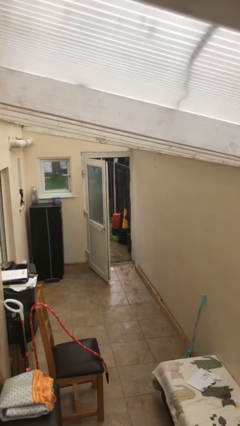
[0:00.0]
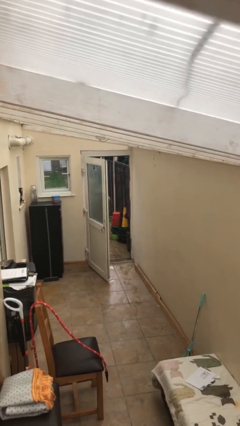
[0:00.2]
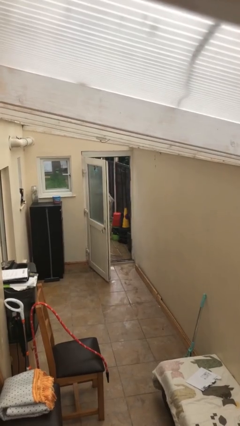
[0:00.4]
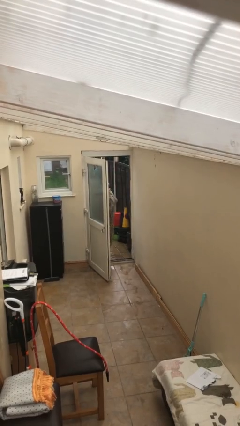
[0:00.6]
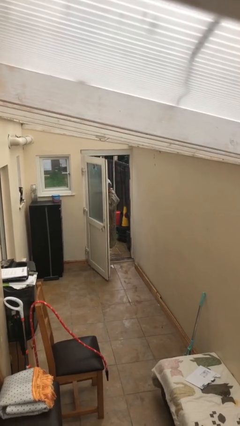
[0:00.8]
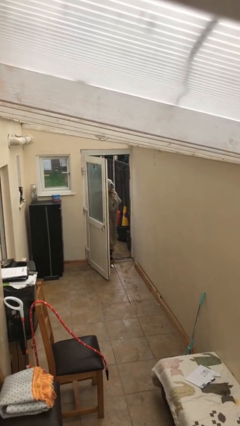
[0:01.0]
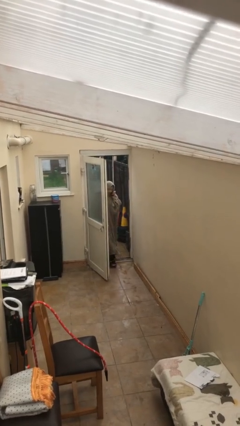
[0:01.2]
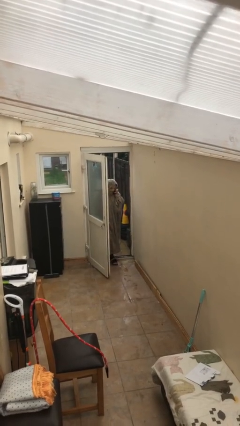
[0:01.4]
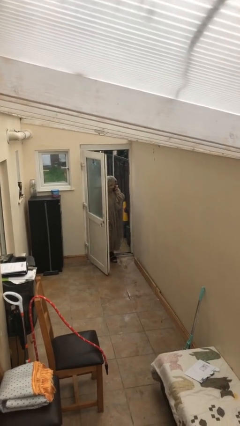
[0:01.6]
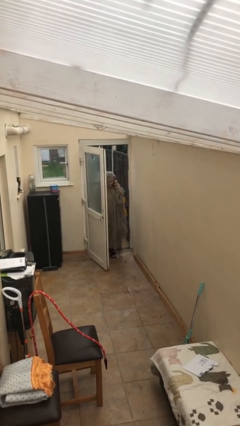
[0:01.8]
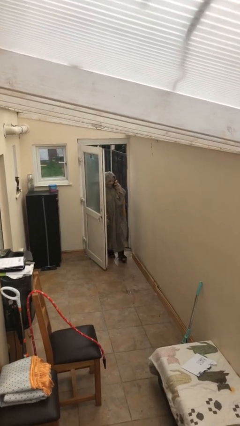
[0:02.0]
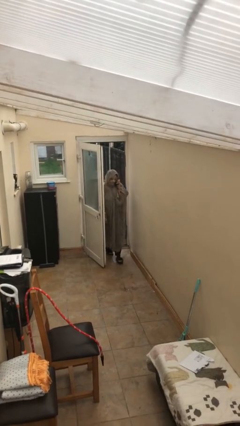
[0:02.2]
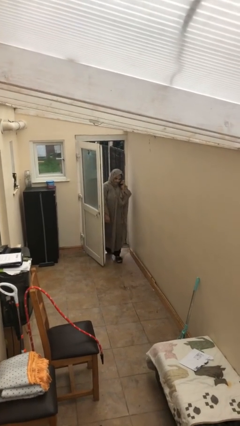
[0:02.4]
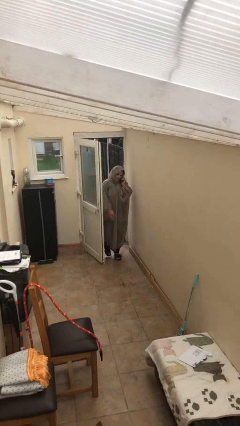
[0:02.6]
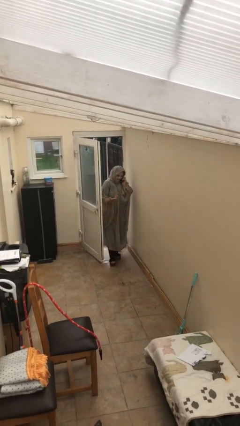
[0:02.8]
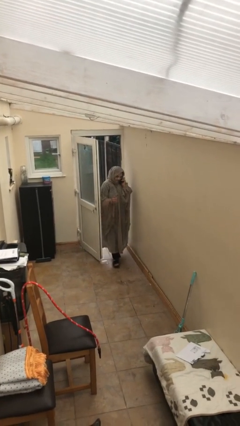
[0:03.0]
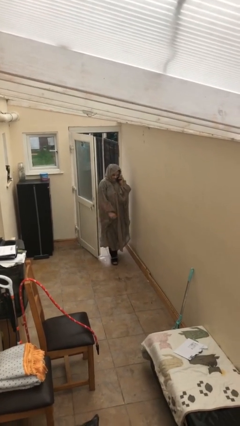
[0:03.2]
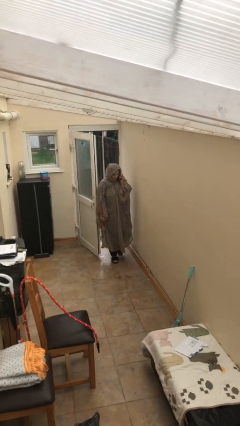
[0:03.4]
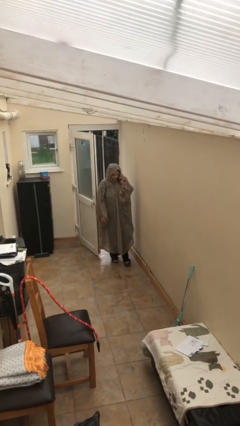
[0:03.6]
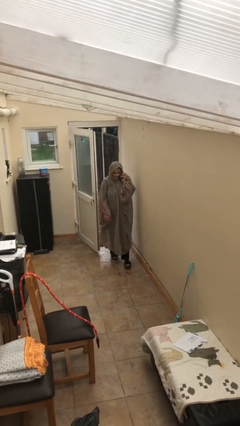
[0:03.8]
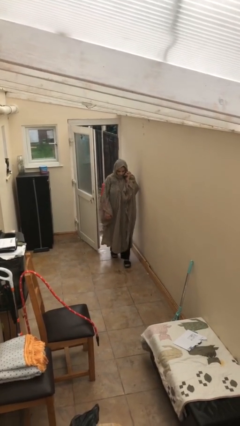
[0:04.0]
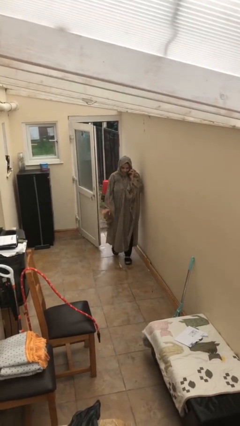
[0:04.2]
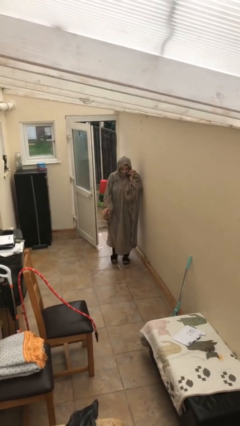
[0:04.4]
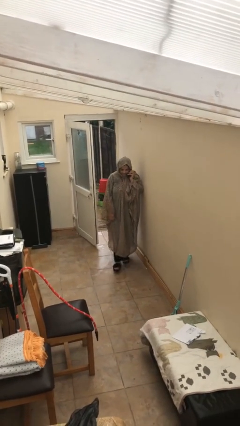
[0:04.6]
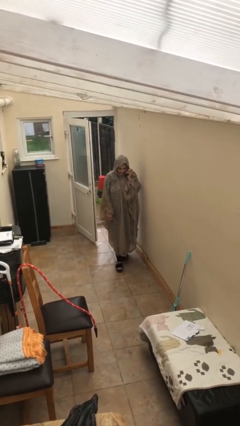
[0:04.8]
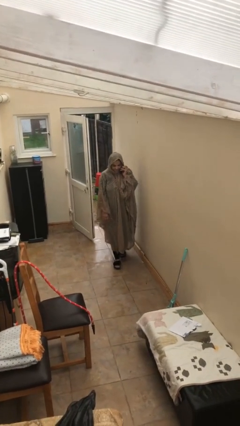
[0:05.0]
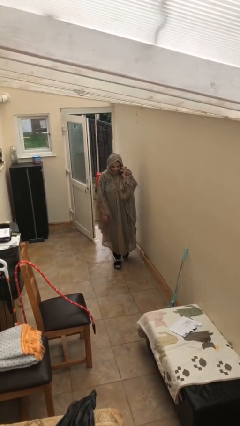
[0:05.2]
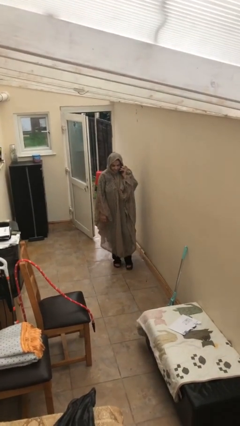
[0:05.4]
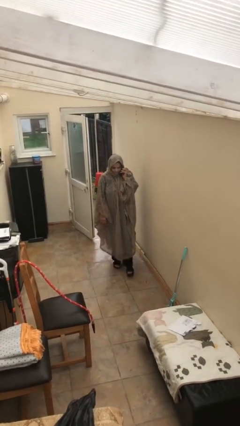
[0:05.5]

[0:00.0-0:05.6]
person enters scene through structure

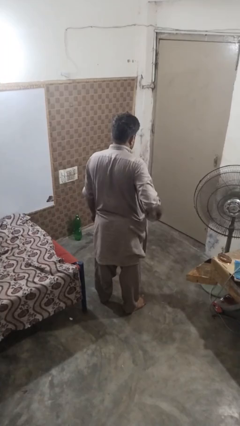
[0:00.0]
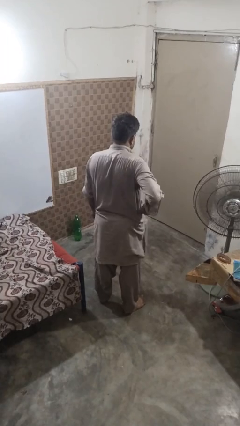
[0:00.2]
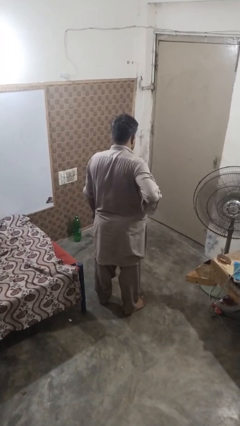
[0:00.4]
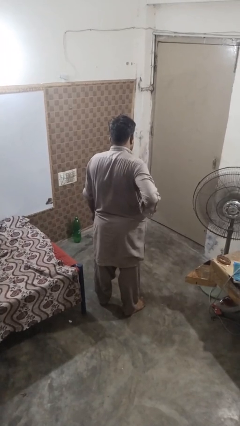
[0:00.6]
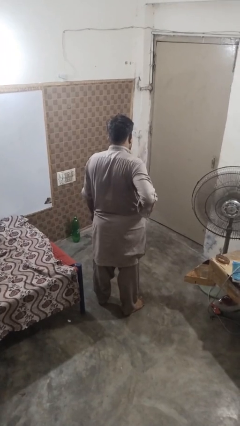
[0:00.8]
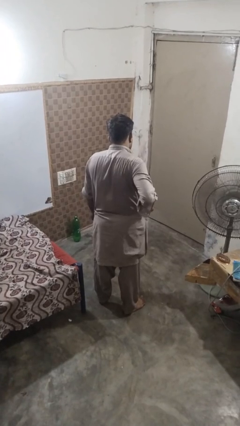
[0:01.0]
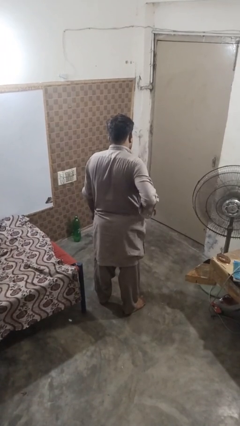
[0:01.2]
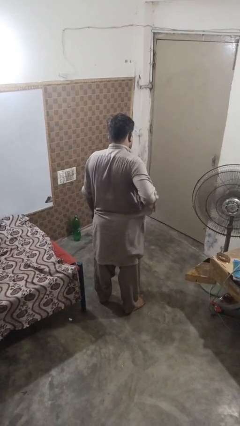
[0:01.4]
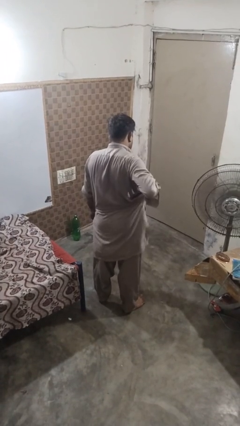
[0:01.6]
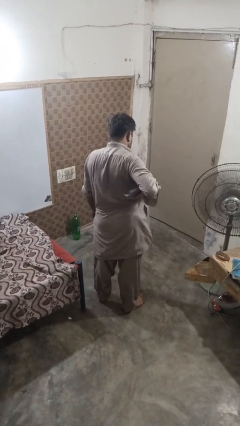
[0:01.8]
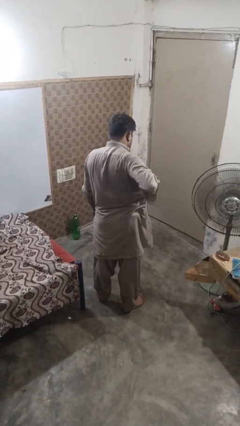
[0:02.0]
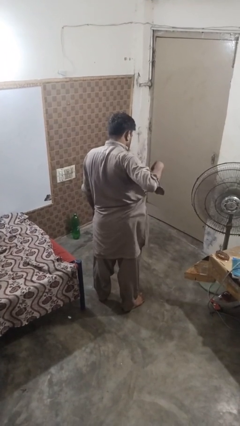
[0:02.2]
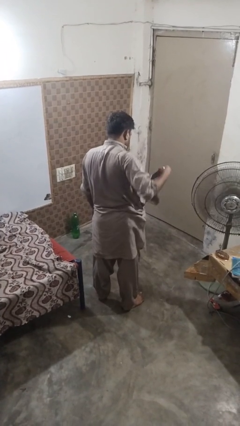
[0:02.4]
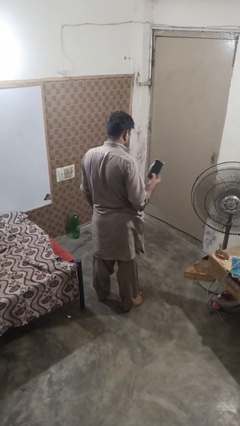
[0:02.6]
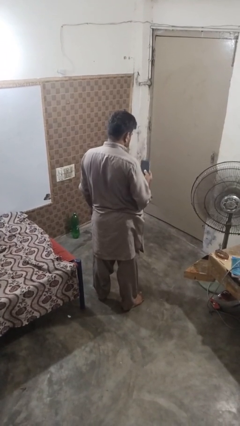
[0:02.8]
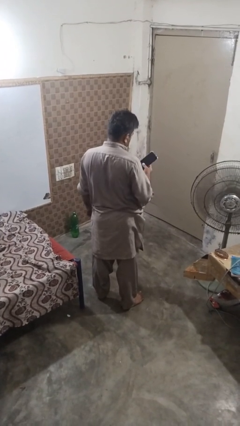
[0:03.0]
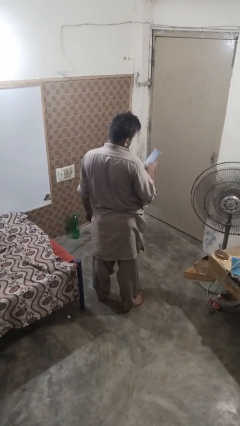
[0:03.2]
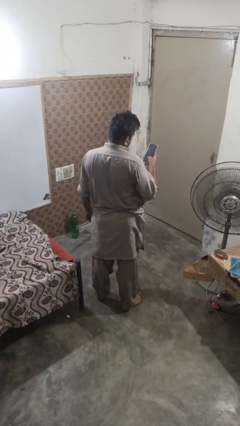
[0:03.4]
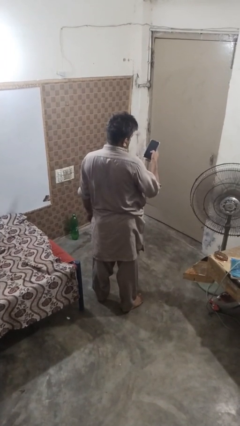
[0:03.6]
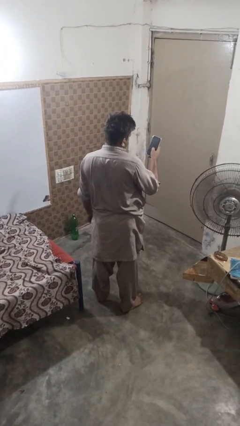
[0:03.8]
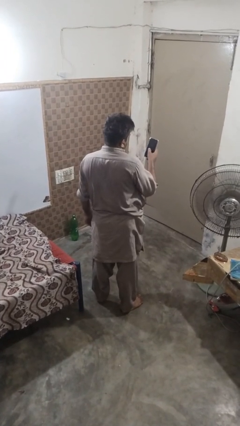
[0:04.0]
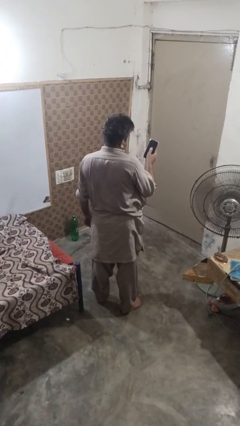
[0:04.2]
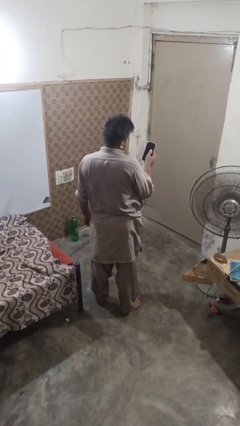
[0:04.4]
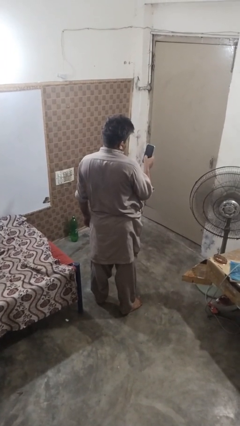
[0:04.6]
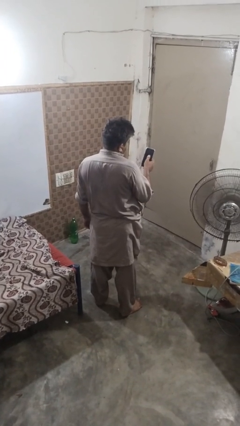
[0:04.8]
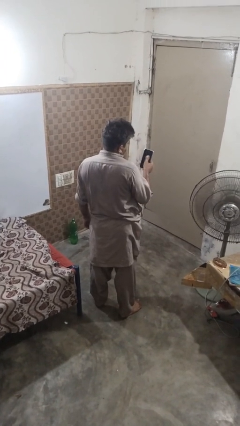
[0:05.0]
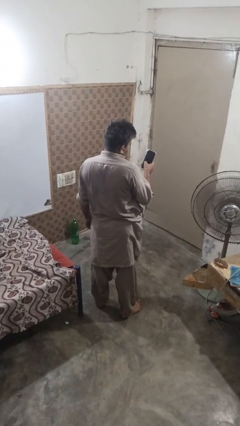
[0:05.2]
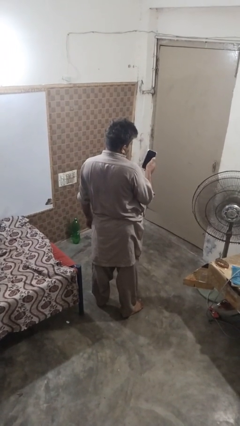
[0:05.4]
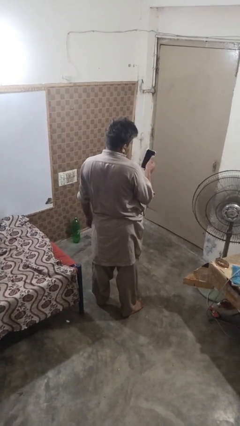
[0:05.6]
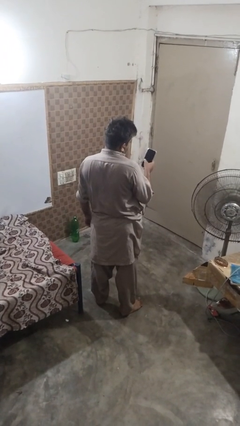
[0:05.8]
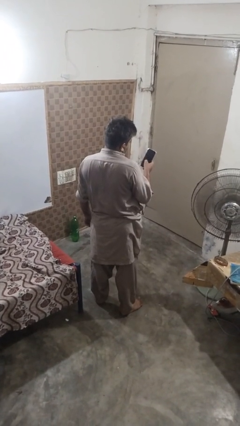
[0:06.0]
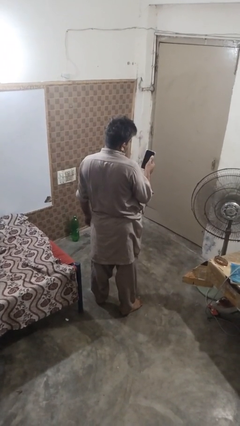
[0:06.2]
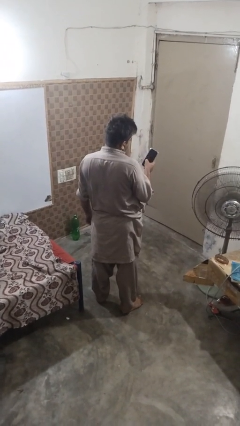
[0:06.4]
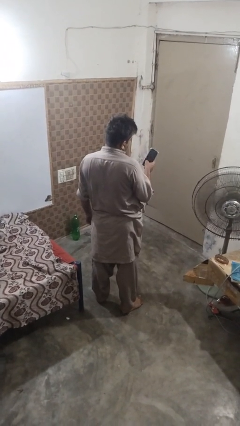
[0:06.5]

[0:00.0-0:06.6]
person takes phone from pocket

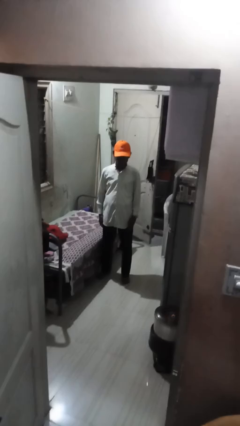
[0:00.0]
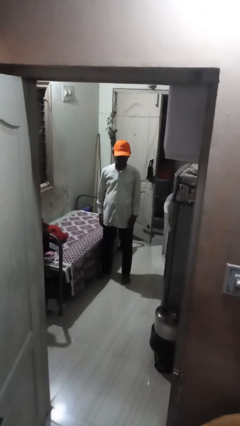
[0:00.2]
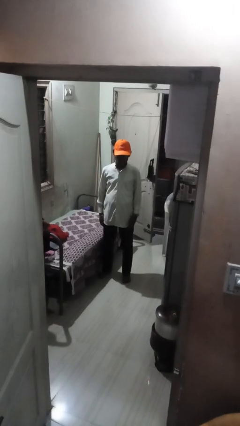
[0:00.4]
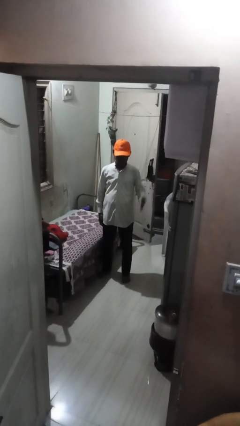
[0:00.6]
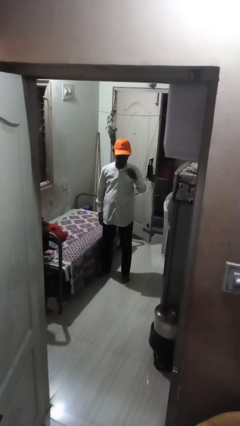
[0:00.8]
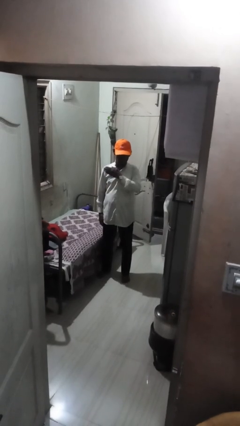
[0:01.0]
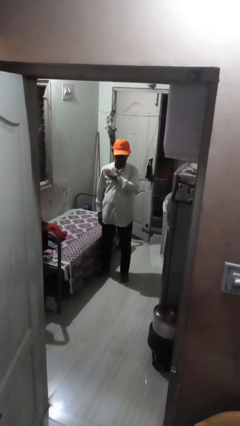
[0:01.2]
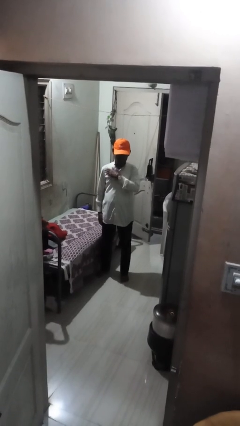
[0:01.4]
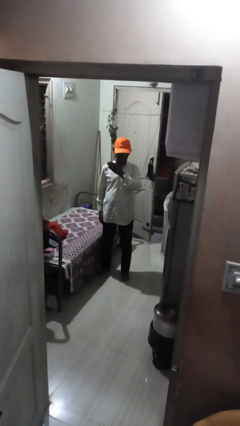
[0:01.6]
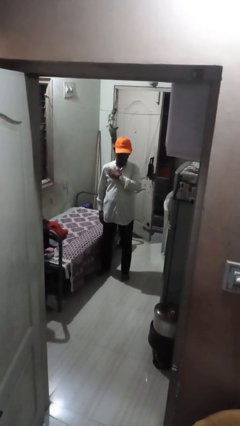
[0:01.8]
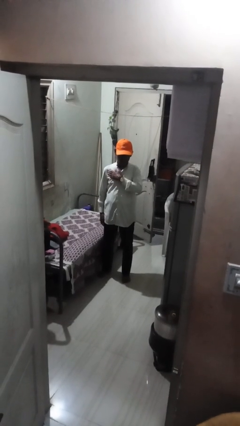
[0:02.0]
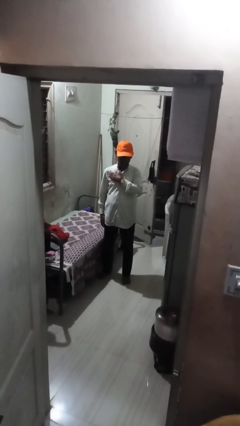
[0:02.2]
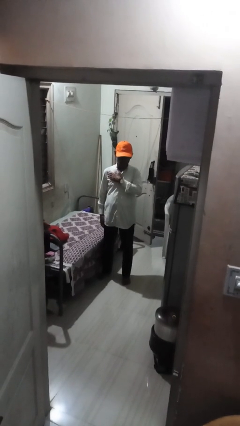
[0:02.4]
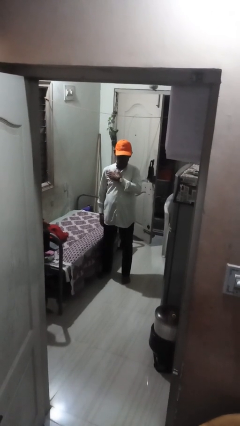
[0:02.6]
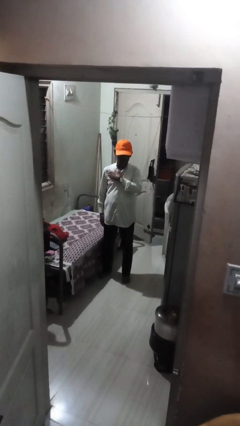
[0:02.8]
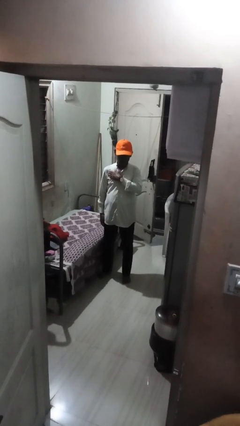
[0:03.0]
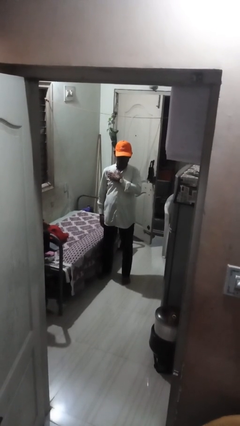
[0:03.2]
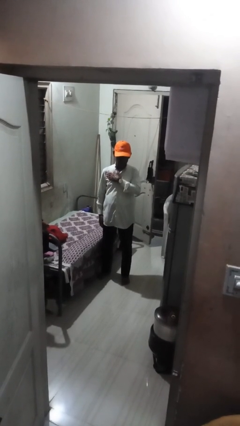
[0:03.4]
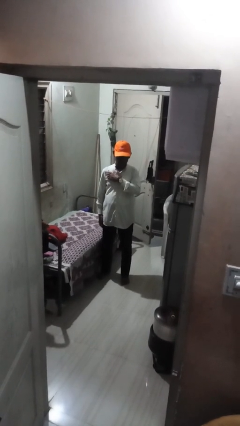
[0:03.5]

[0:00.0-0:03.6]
person drums on chest

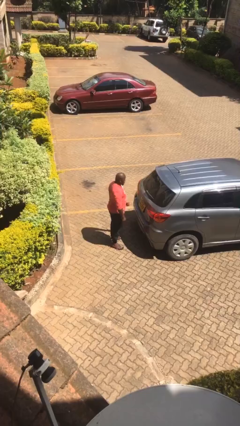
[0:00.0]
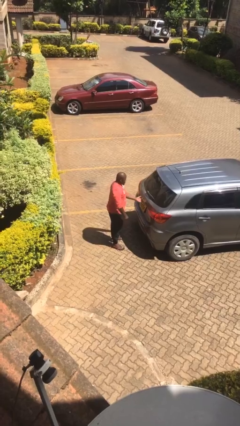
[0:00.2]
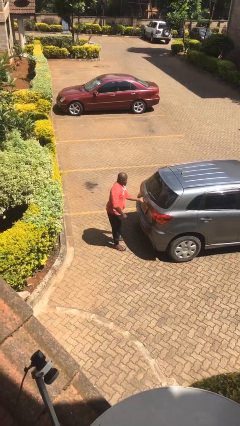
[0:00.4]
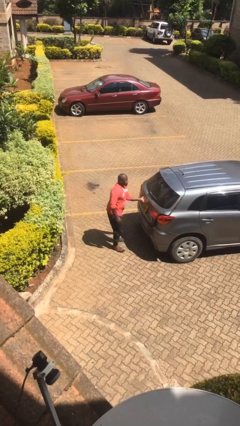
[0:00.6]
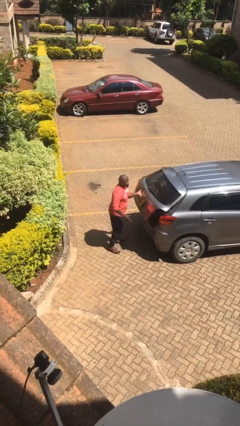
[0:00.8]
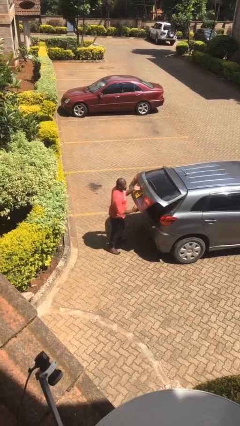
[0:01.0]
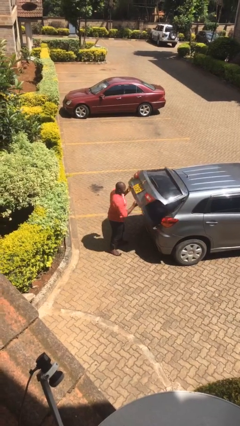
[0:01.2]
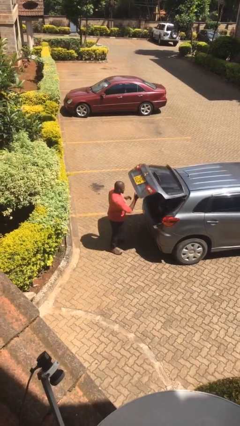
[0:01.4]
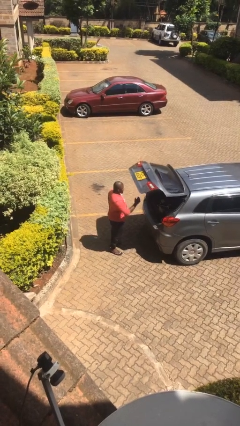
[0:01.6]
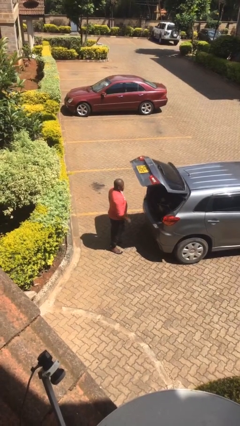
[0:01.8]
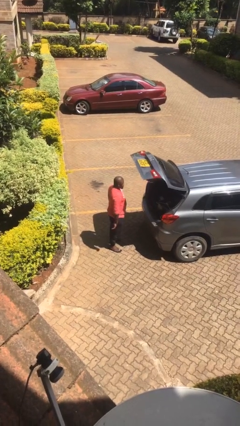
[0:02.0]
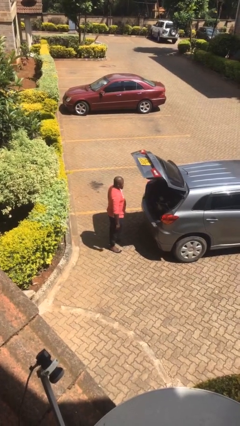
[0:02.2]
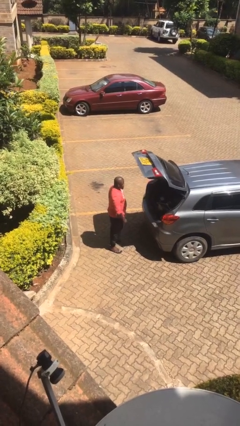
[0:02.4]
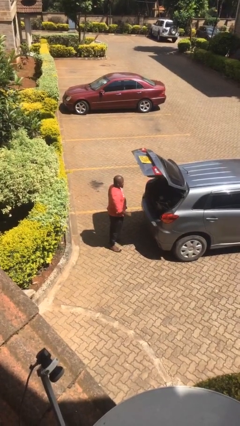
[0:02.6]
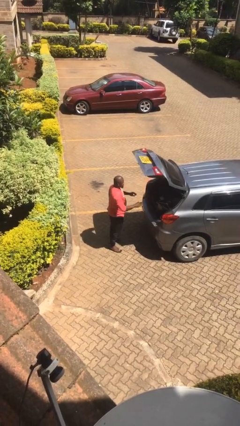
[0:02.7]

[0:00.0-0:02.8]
person opens car trunk
